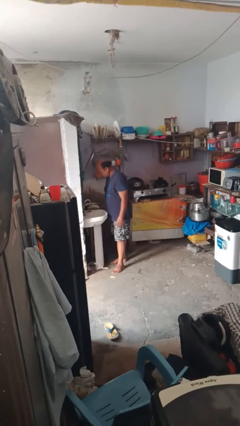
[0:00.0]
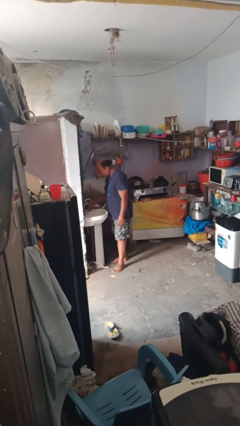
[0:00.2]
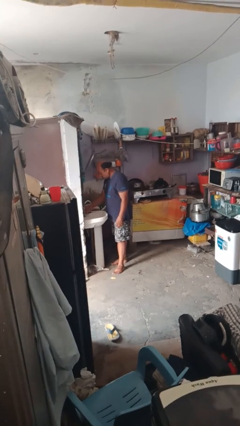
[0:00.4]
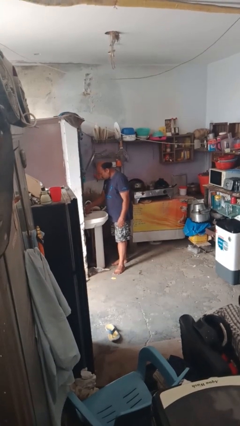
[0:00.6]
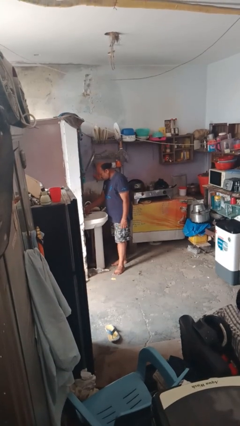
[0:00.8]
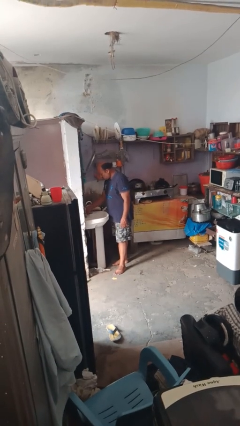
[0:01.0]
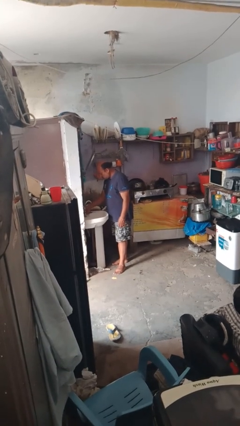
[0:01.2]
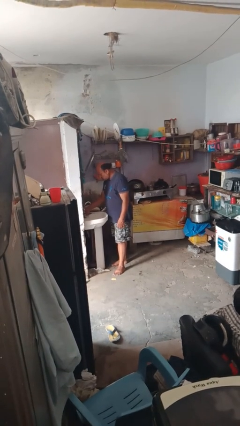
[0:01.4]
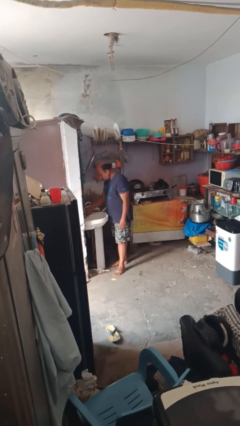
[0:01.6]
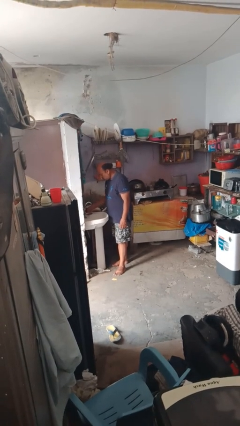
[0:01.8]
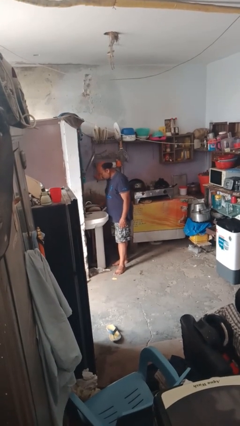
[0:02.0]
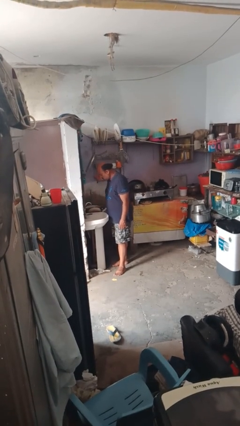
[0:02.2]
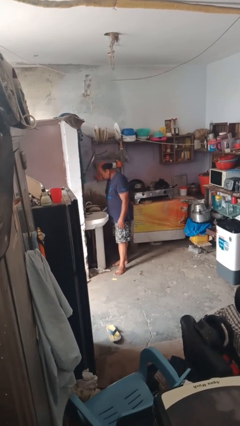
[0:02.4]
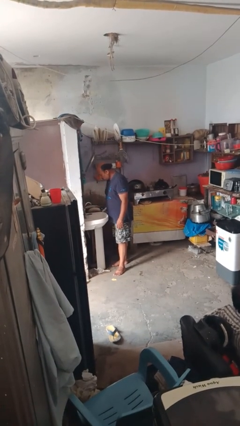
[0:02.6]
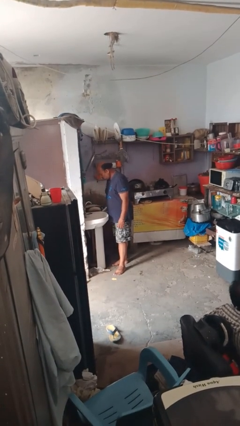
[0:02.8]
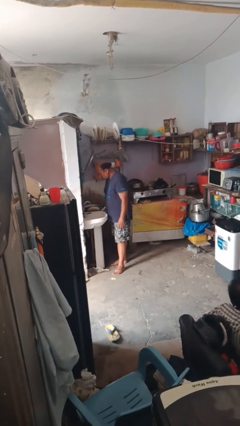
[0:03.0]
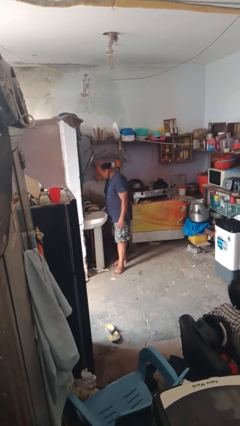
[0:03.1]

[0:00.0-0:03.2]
person turns off faucet

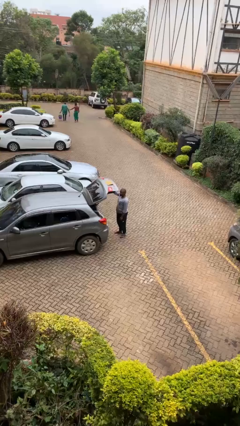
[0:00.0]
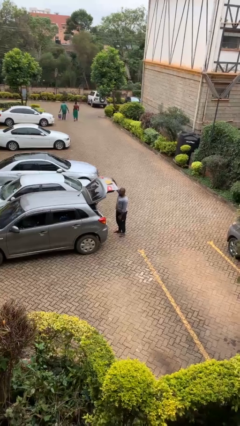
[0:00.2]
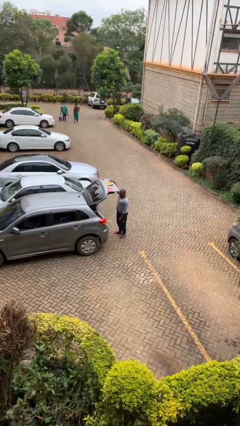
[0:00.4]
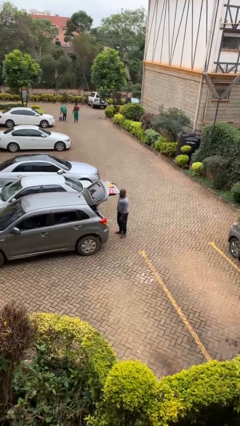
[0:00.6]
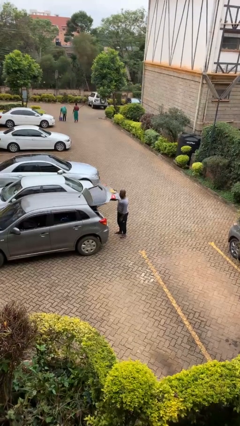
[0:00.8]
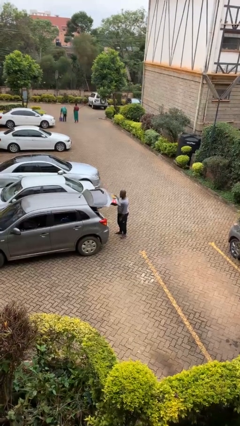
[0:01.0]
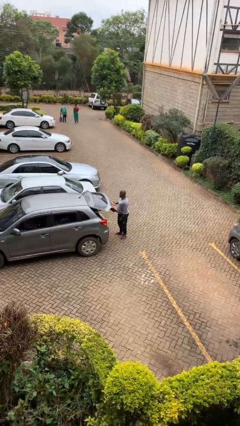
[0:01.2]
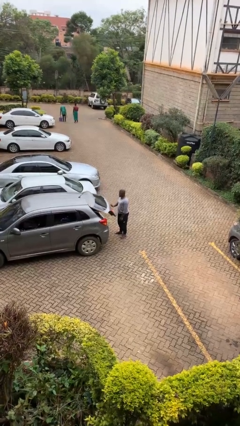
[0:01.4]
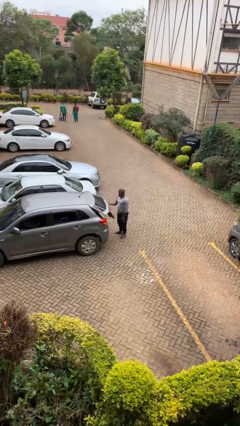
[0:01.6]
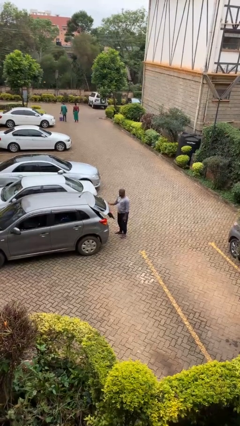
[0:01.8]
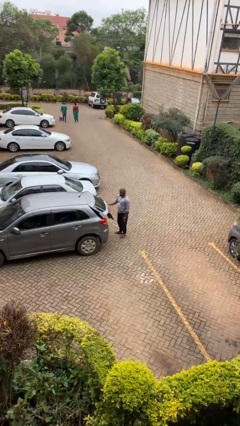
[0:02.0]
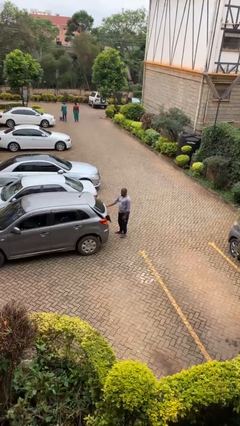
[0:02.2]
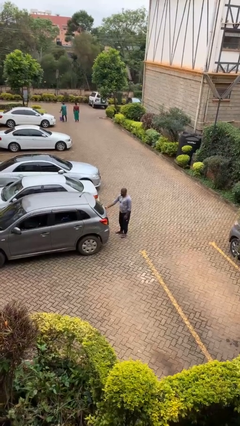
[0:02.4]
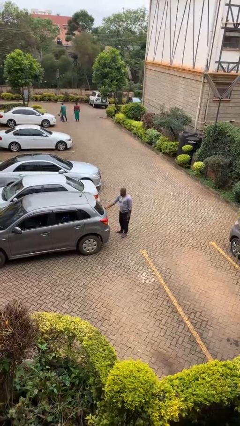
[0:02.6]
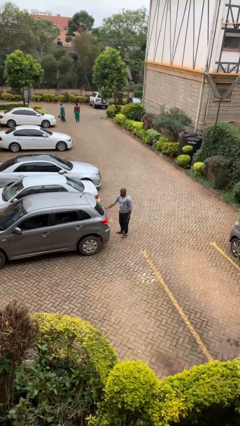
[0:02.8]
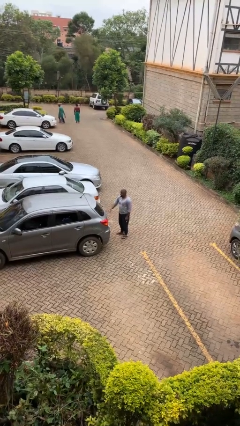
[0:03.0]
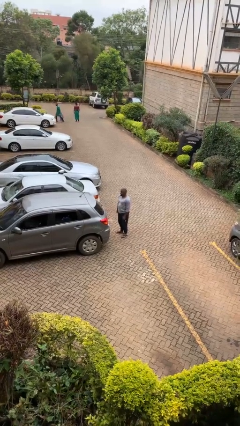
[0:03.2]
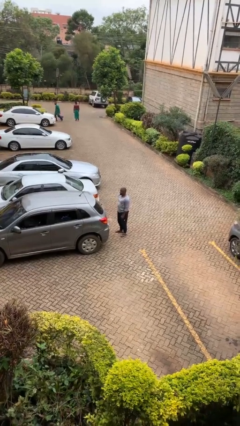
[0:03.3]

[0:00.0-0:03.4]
person closes car trunk

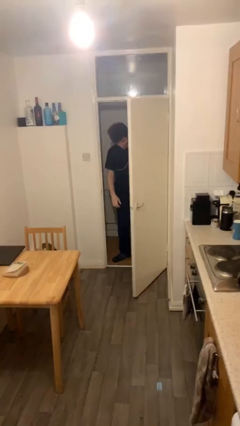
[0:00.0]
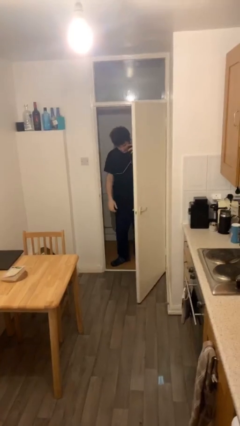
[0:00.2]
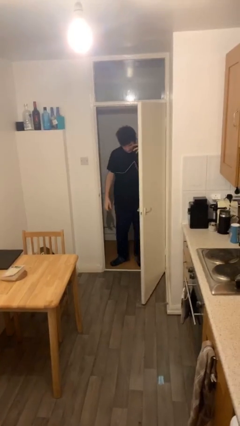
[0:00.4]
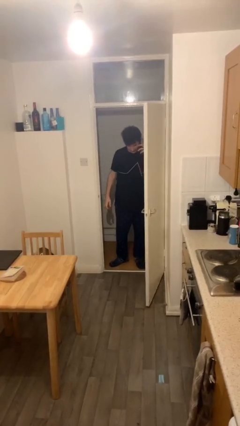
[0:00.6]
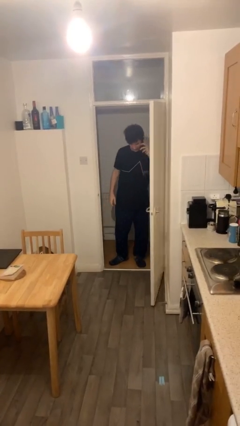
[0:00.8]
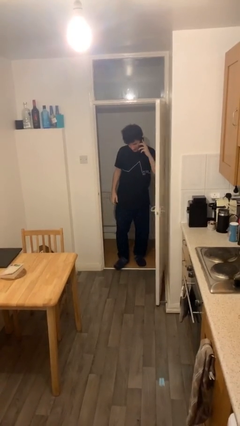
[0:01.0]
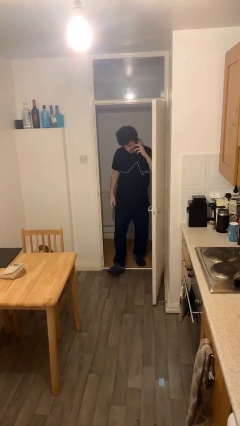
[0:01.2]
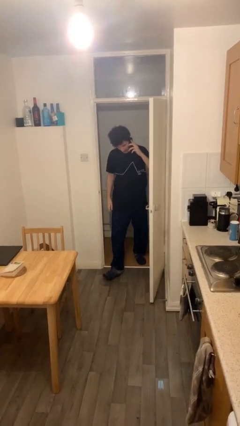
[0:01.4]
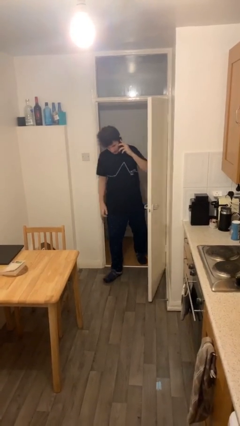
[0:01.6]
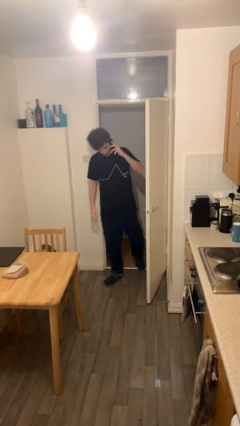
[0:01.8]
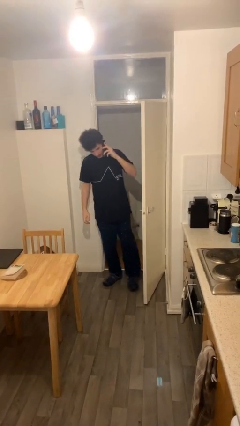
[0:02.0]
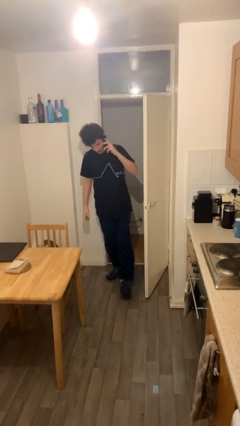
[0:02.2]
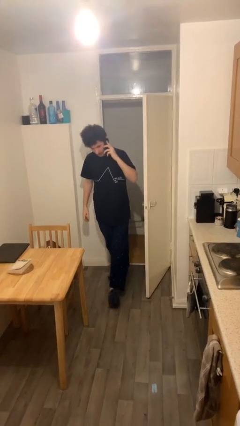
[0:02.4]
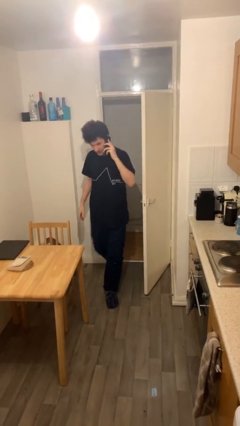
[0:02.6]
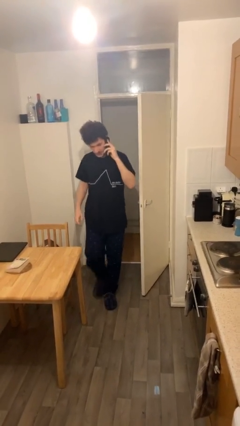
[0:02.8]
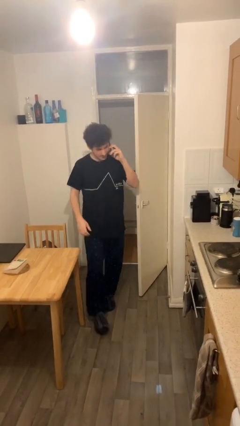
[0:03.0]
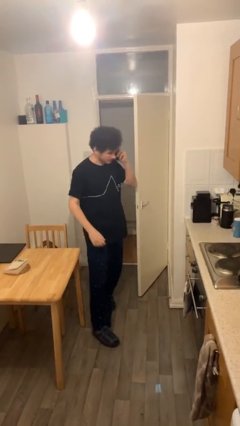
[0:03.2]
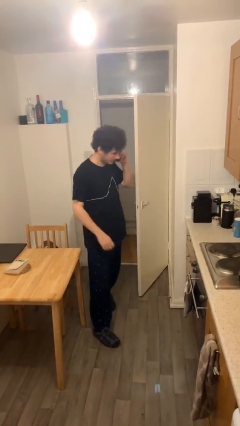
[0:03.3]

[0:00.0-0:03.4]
person enters scene through structure

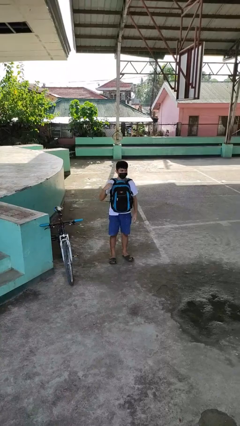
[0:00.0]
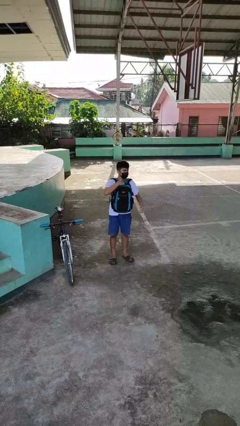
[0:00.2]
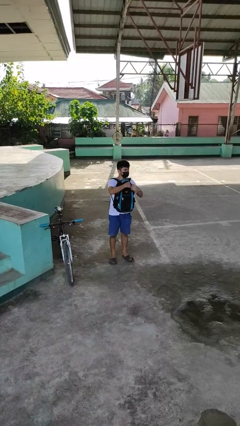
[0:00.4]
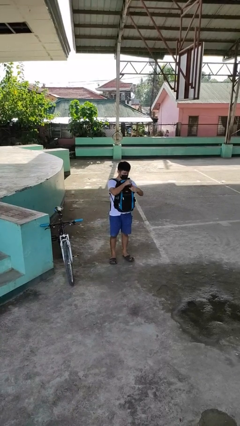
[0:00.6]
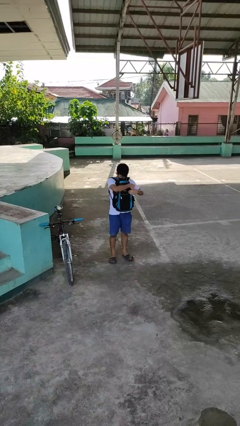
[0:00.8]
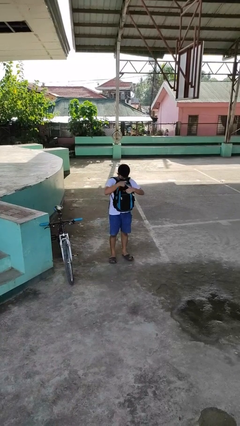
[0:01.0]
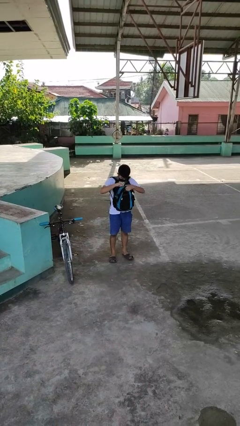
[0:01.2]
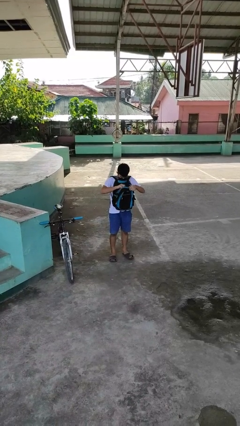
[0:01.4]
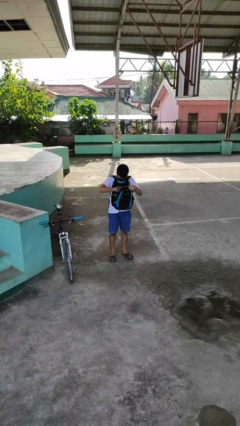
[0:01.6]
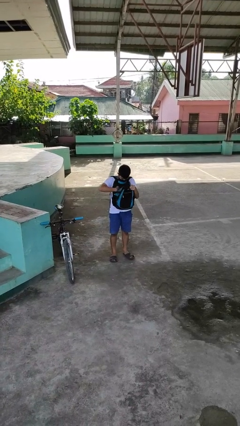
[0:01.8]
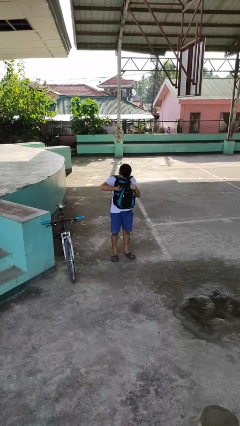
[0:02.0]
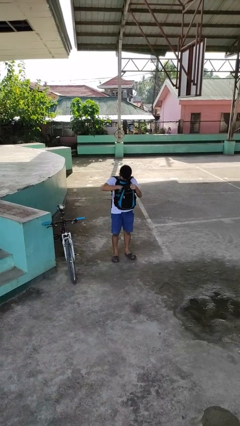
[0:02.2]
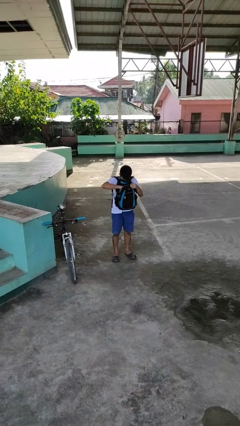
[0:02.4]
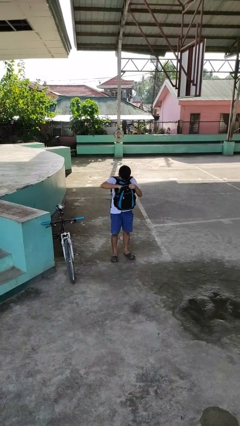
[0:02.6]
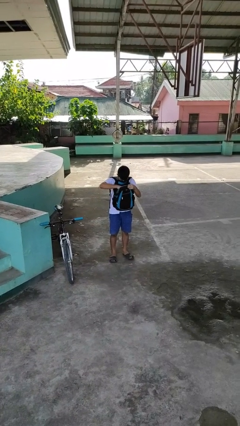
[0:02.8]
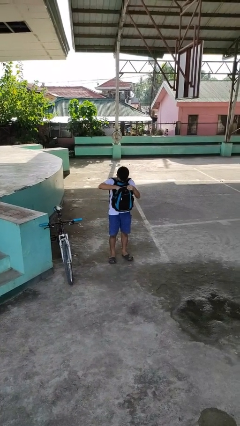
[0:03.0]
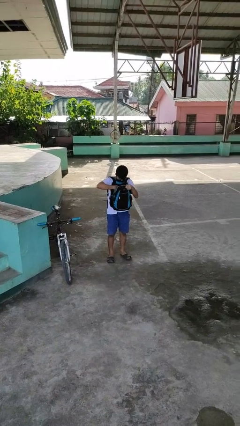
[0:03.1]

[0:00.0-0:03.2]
person searches in backpack

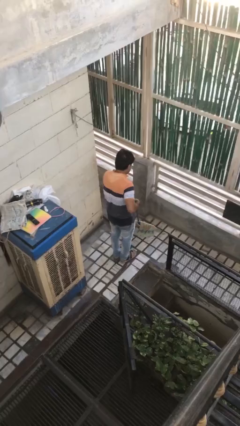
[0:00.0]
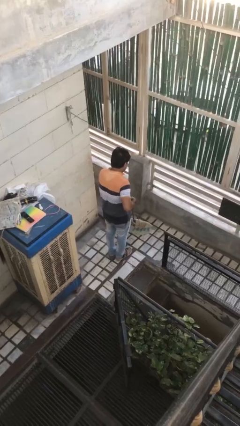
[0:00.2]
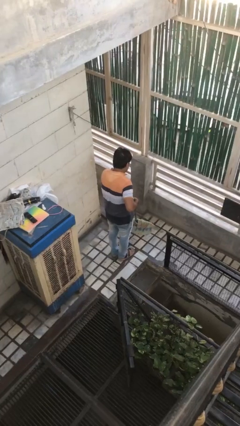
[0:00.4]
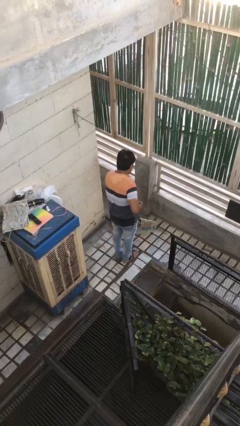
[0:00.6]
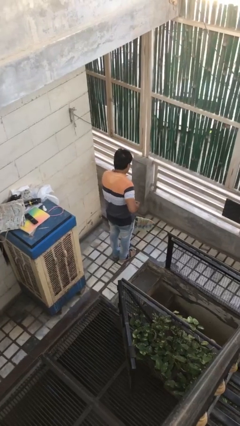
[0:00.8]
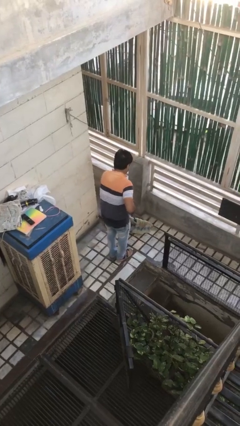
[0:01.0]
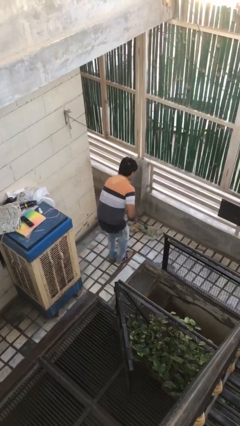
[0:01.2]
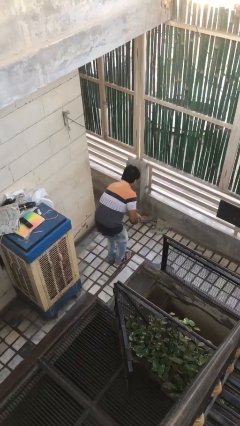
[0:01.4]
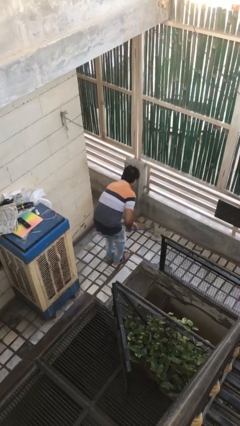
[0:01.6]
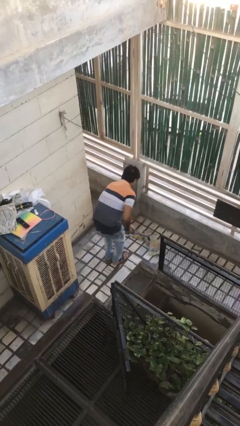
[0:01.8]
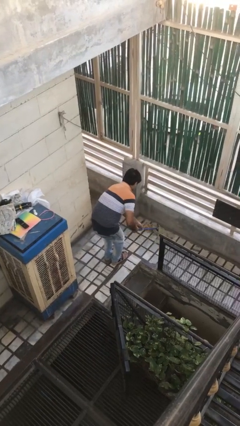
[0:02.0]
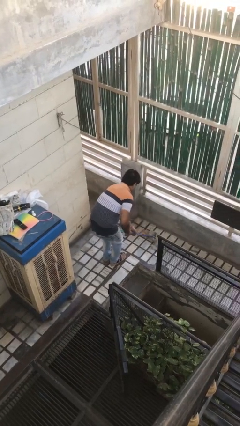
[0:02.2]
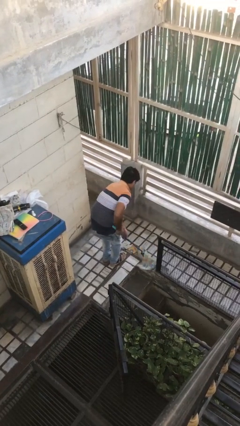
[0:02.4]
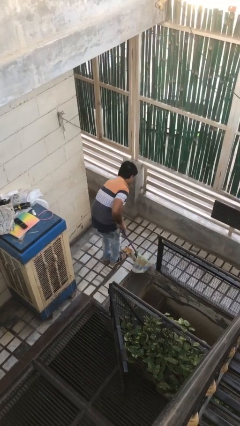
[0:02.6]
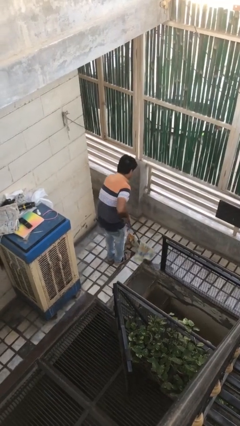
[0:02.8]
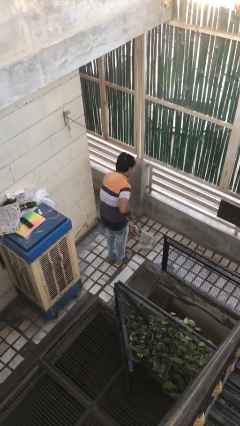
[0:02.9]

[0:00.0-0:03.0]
person mops

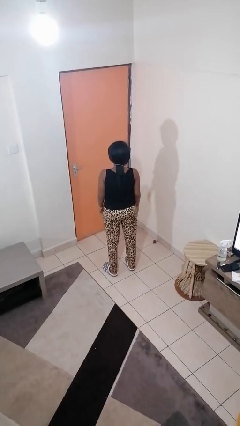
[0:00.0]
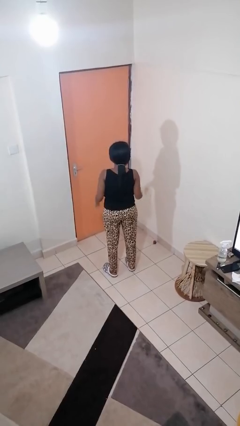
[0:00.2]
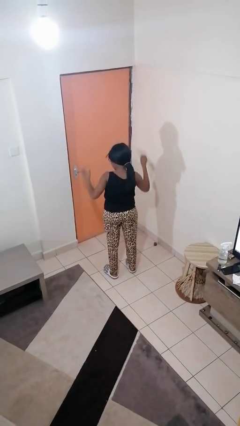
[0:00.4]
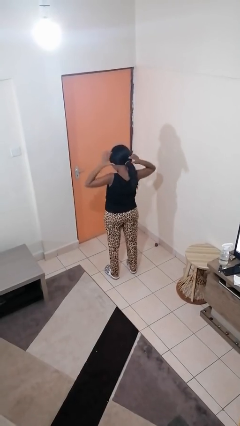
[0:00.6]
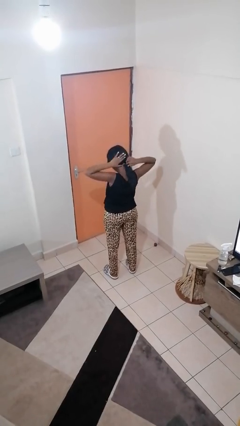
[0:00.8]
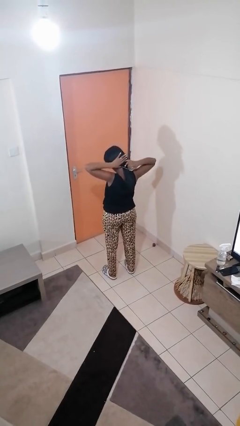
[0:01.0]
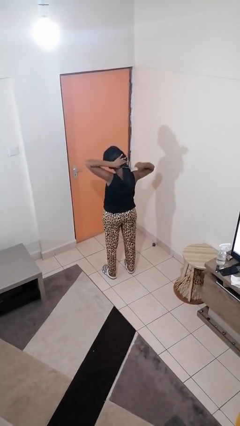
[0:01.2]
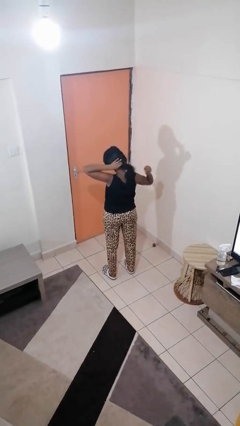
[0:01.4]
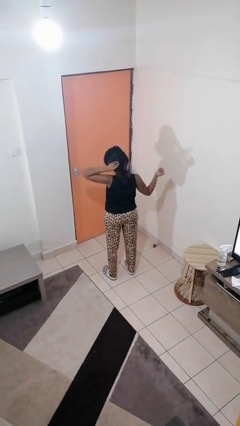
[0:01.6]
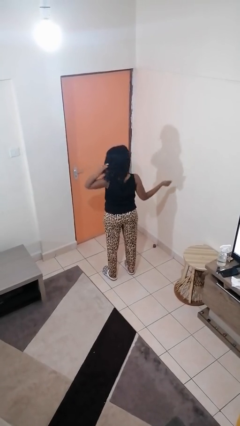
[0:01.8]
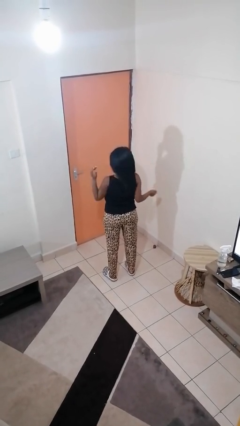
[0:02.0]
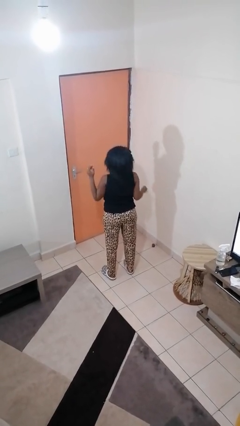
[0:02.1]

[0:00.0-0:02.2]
person takes off hairtie
